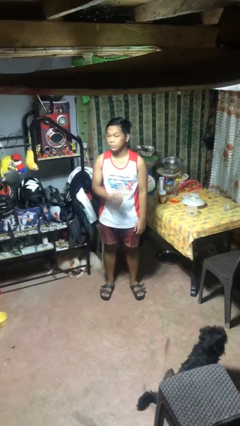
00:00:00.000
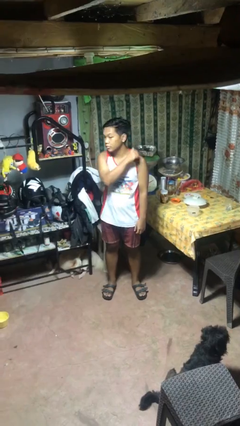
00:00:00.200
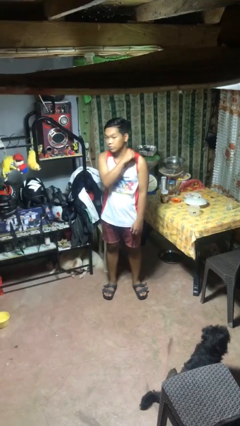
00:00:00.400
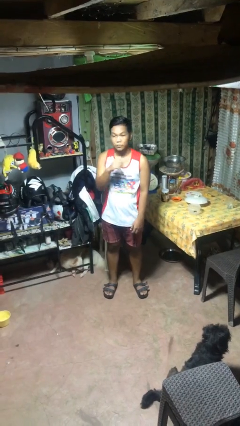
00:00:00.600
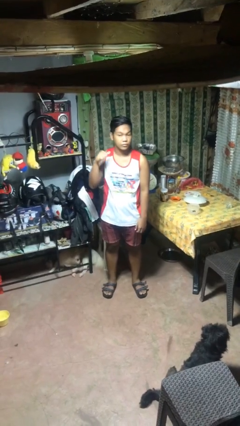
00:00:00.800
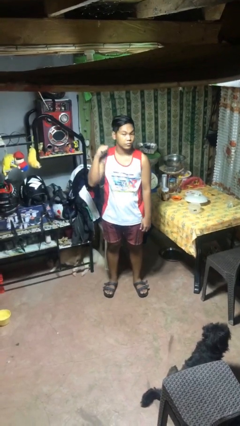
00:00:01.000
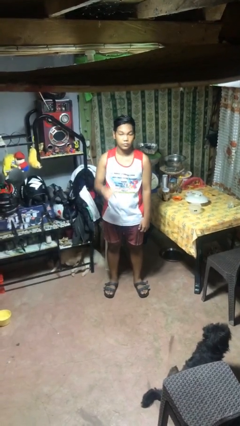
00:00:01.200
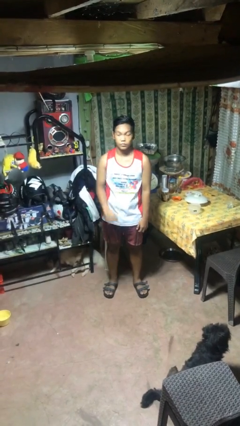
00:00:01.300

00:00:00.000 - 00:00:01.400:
person gestures cut

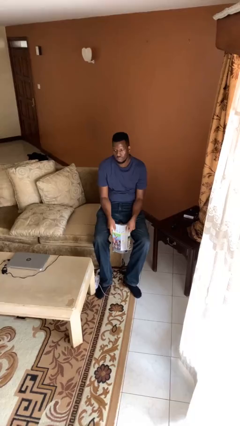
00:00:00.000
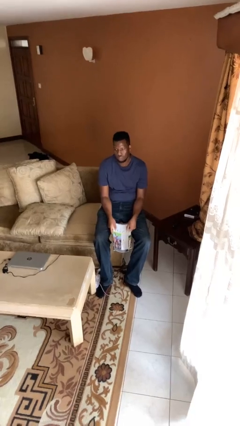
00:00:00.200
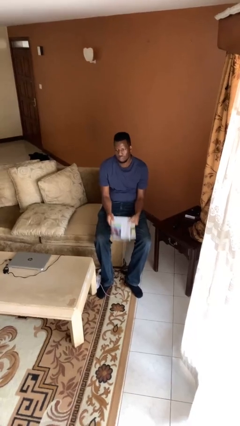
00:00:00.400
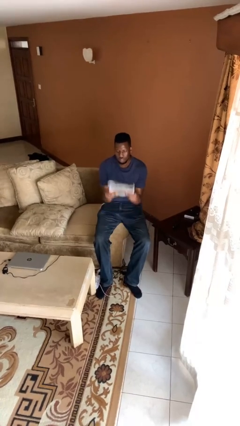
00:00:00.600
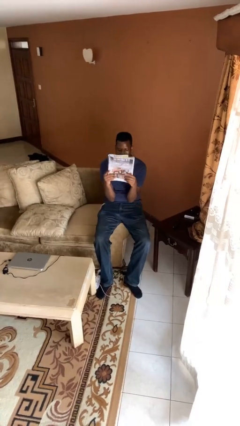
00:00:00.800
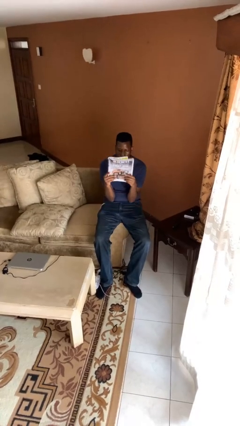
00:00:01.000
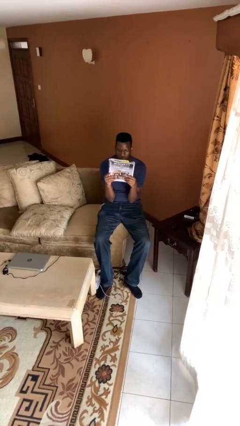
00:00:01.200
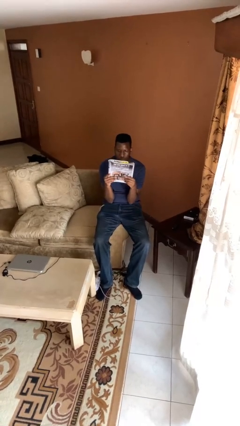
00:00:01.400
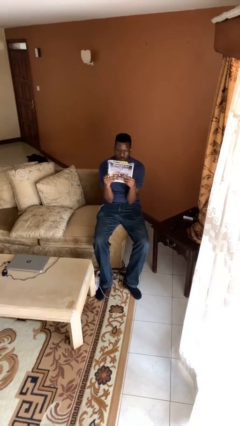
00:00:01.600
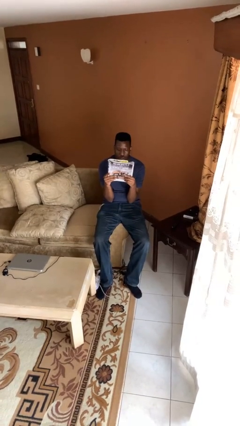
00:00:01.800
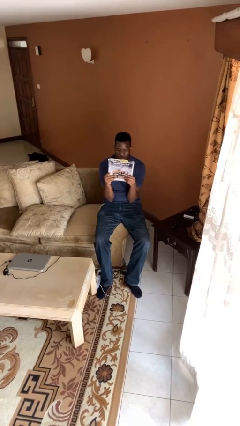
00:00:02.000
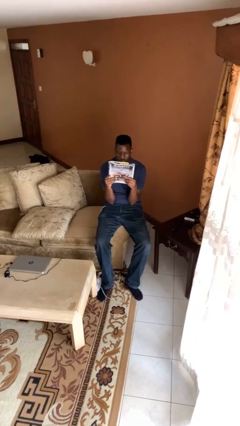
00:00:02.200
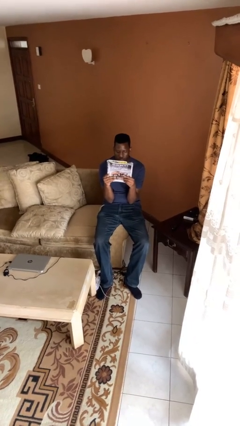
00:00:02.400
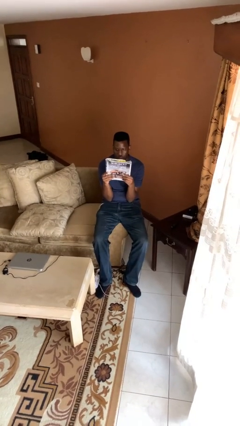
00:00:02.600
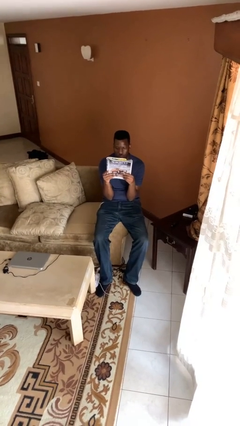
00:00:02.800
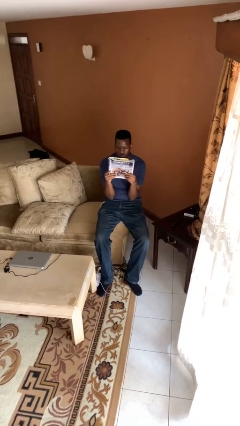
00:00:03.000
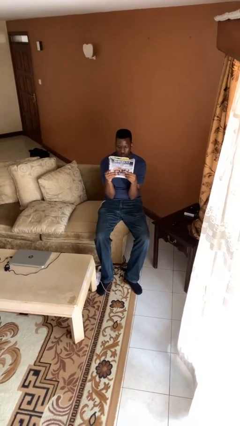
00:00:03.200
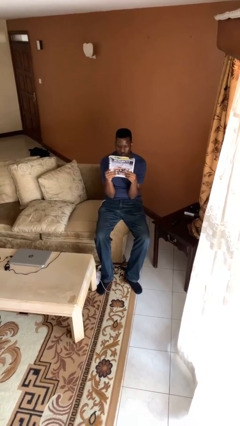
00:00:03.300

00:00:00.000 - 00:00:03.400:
person reads document

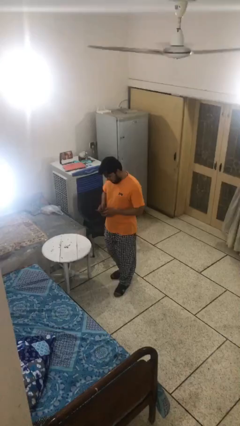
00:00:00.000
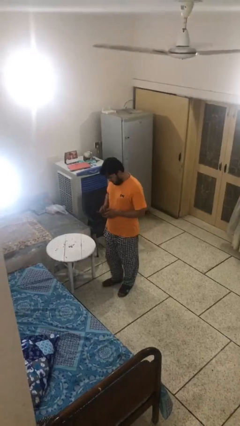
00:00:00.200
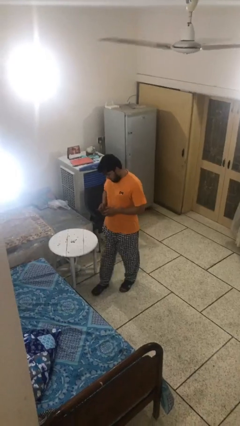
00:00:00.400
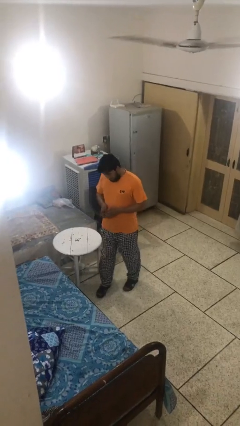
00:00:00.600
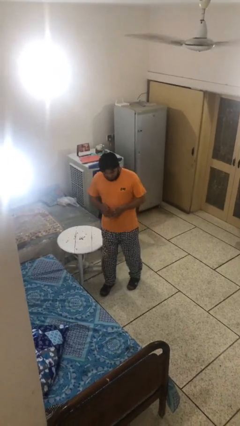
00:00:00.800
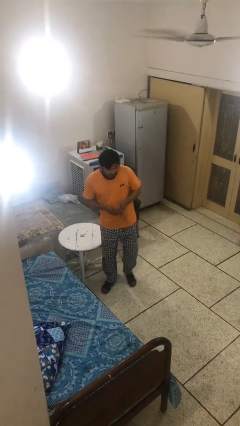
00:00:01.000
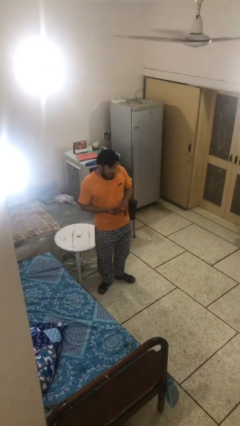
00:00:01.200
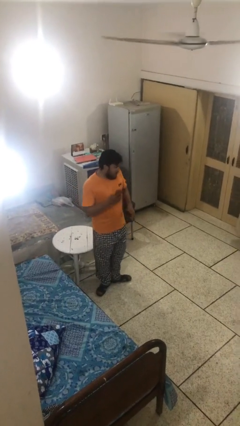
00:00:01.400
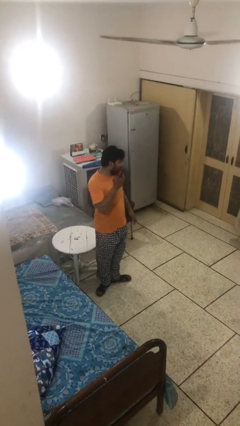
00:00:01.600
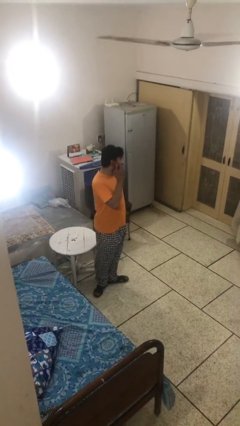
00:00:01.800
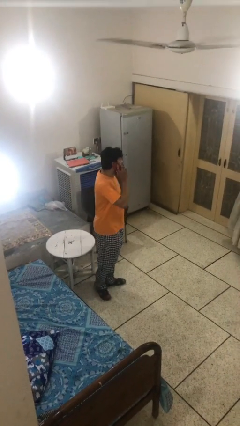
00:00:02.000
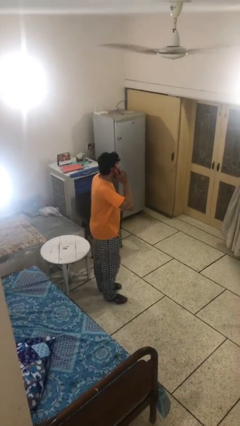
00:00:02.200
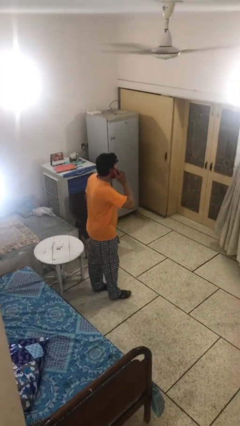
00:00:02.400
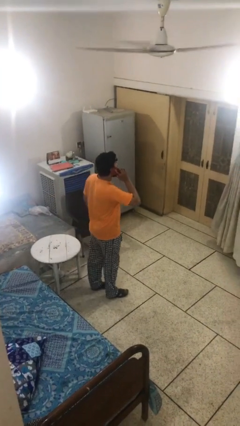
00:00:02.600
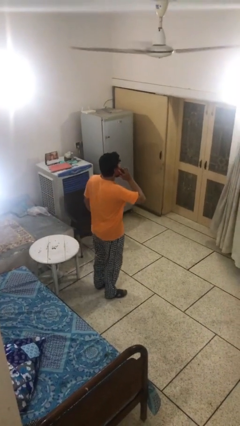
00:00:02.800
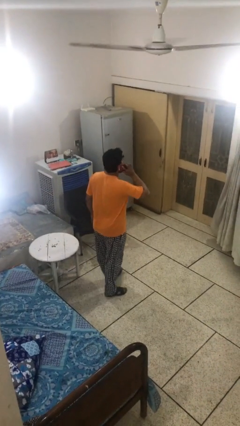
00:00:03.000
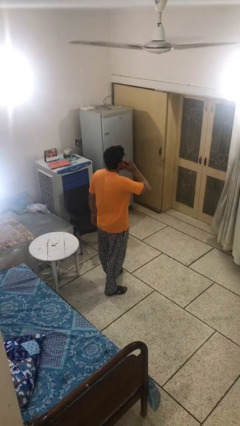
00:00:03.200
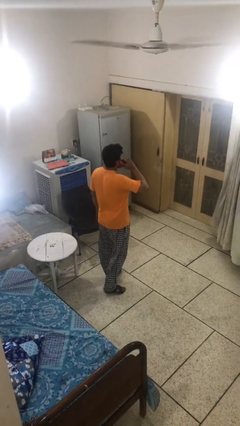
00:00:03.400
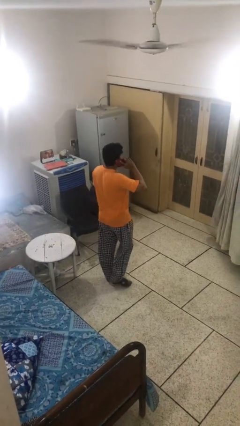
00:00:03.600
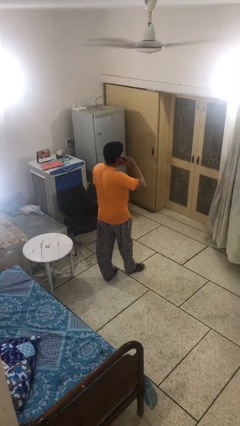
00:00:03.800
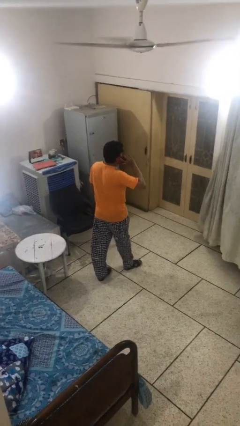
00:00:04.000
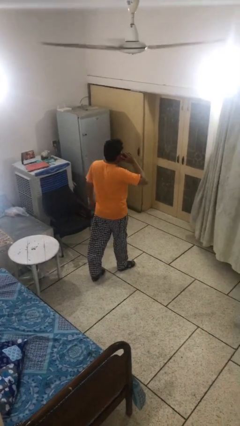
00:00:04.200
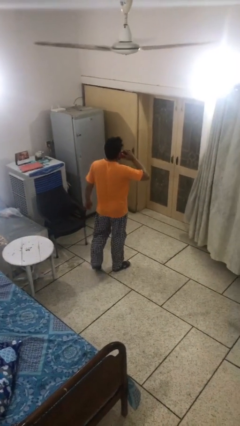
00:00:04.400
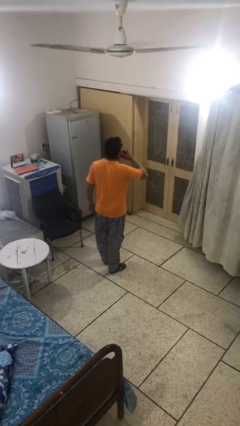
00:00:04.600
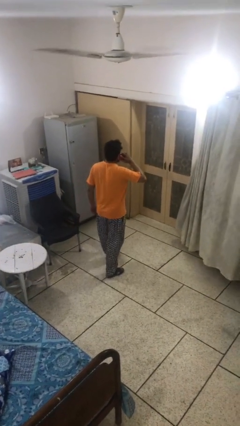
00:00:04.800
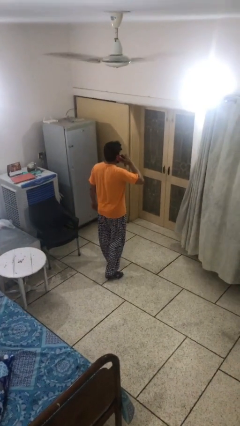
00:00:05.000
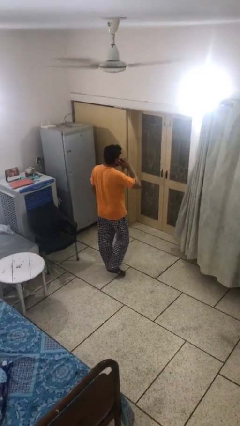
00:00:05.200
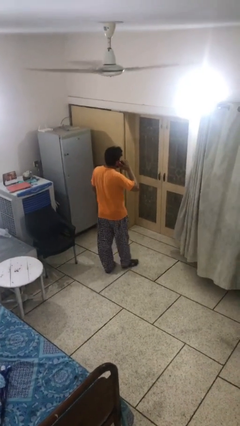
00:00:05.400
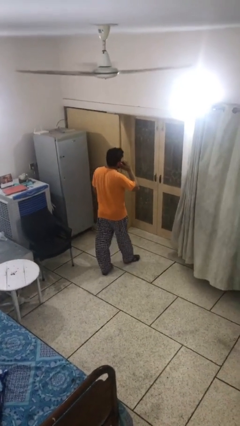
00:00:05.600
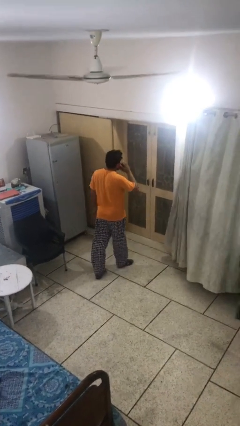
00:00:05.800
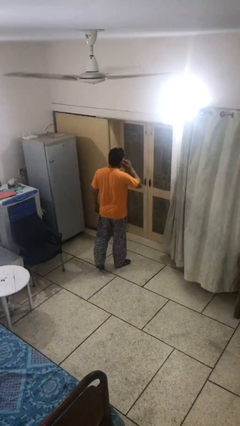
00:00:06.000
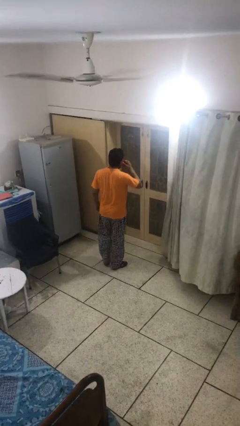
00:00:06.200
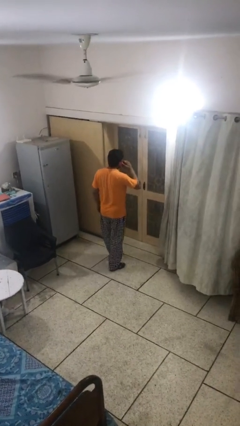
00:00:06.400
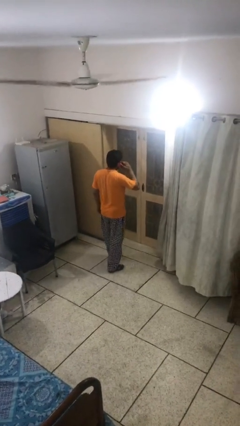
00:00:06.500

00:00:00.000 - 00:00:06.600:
person talks on phone

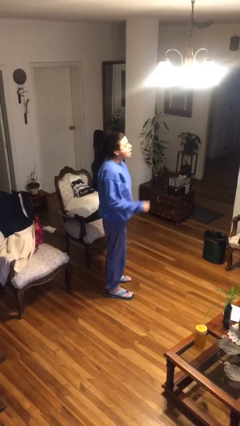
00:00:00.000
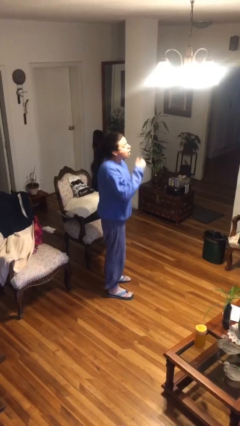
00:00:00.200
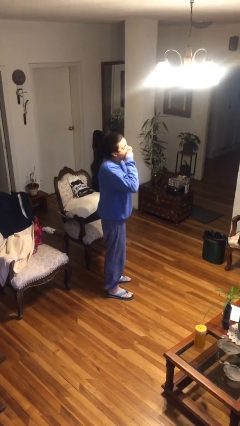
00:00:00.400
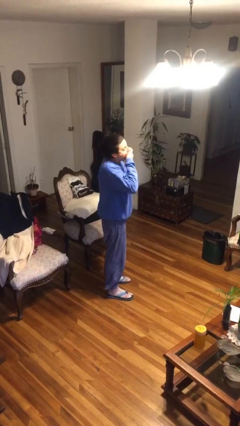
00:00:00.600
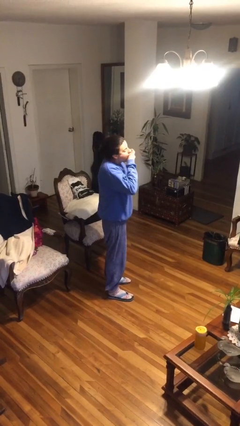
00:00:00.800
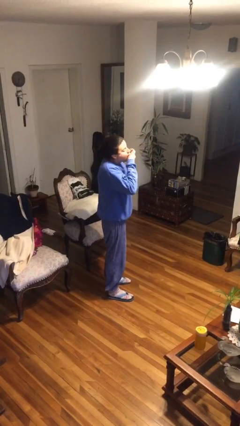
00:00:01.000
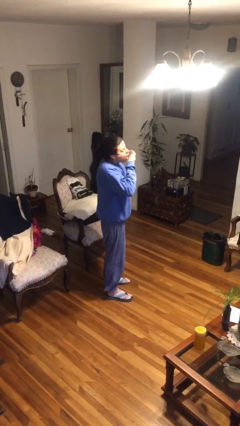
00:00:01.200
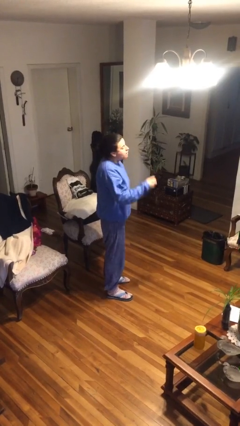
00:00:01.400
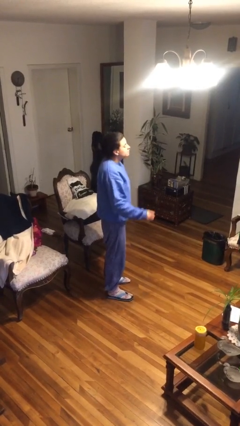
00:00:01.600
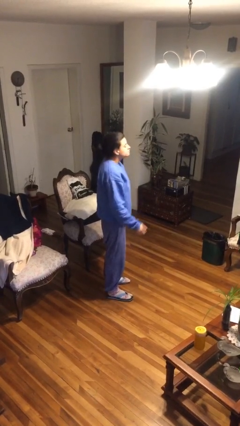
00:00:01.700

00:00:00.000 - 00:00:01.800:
person yawns

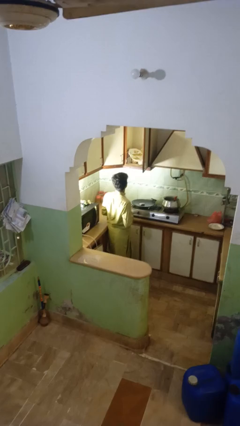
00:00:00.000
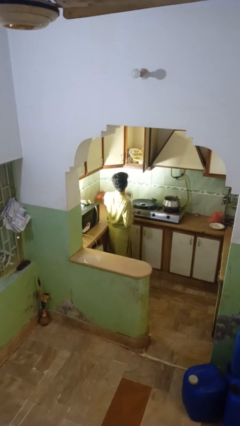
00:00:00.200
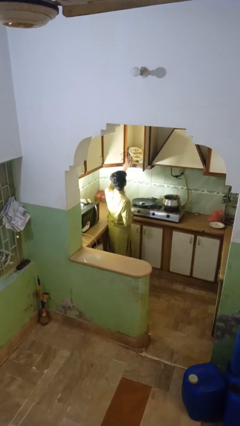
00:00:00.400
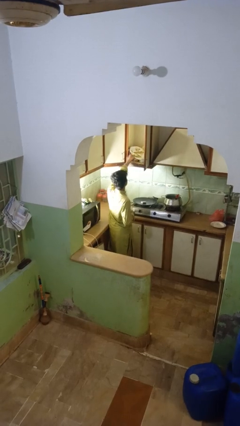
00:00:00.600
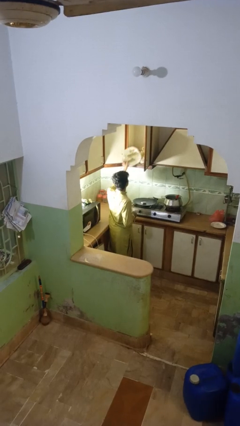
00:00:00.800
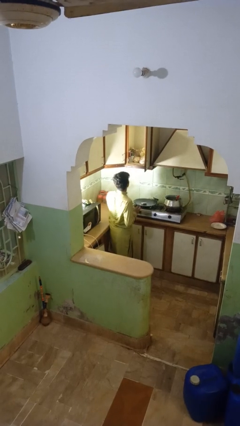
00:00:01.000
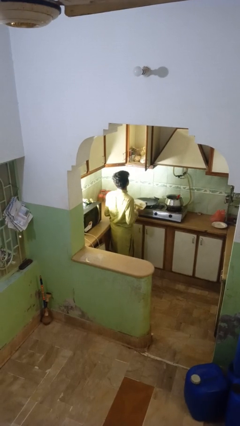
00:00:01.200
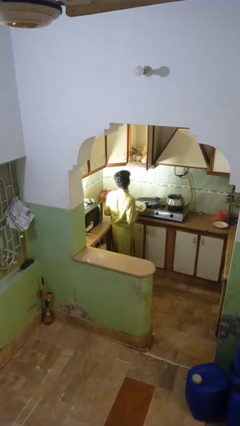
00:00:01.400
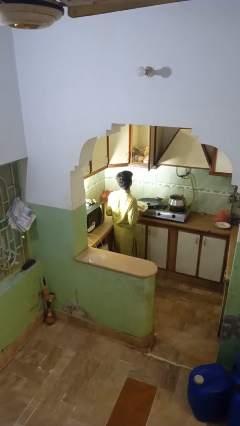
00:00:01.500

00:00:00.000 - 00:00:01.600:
person takes object from cabinet

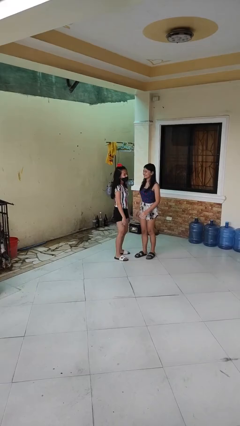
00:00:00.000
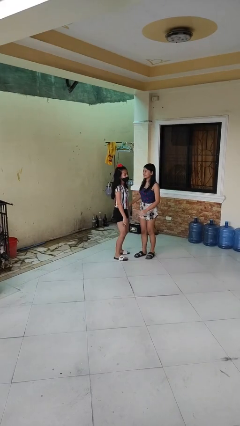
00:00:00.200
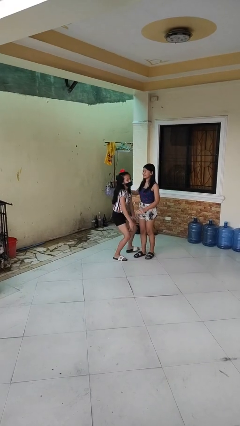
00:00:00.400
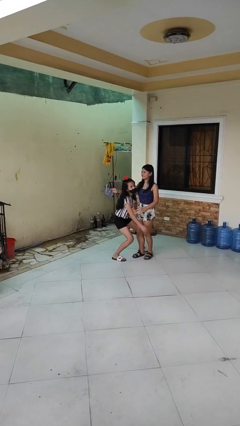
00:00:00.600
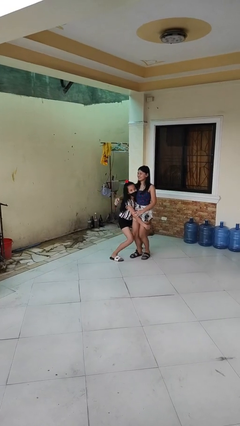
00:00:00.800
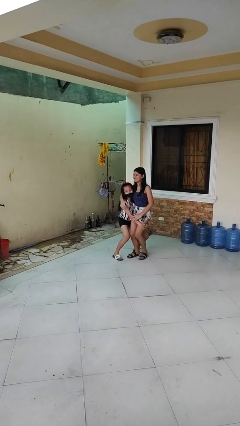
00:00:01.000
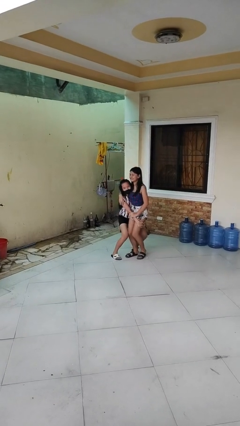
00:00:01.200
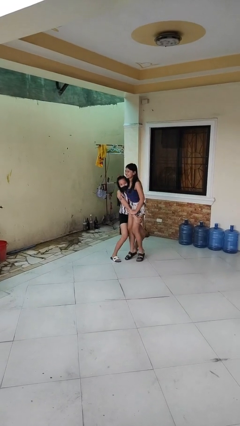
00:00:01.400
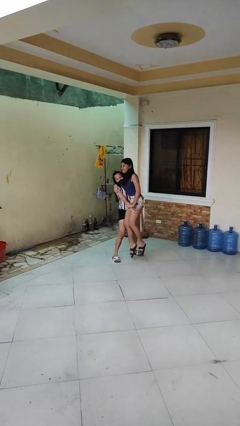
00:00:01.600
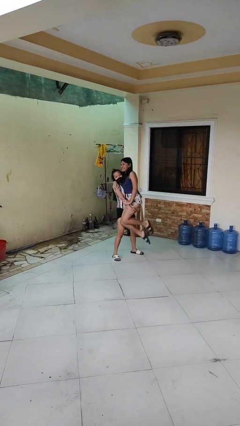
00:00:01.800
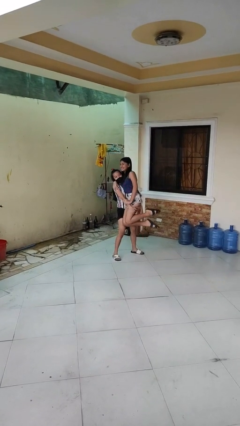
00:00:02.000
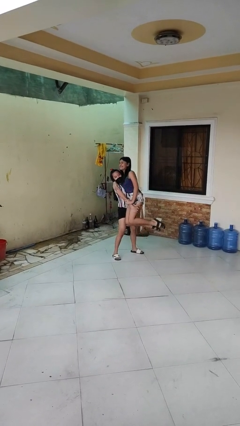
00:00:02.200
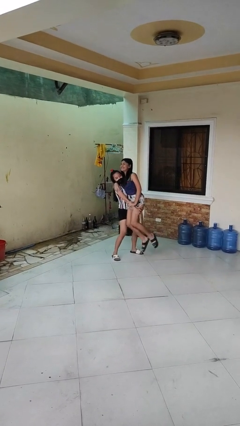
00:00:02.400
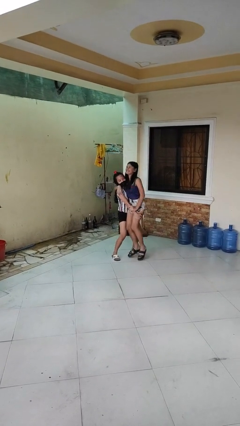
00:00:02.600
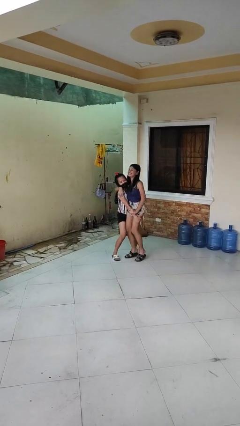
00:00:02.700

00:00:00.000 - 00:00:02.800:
person picks up person
